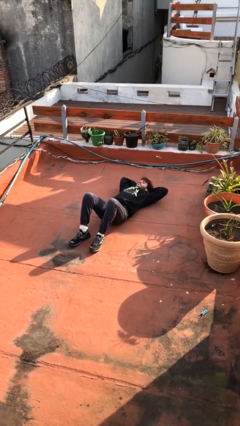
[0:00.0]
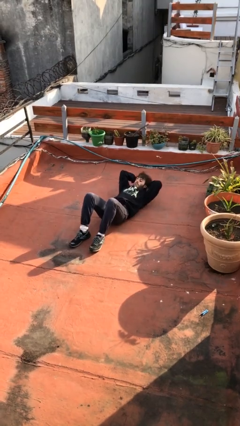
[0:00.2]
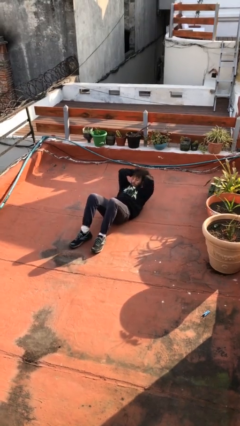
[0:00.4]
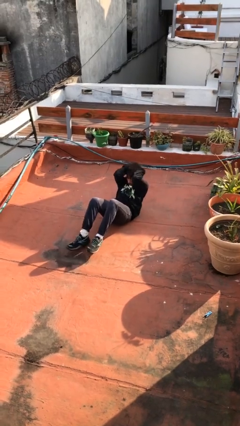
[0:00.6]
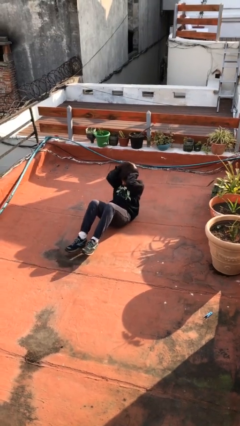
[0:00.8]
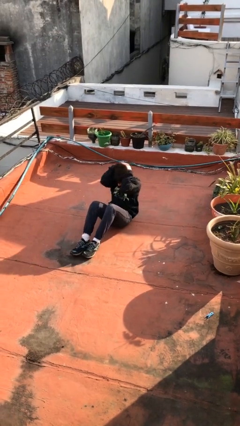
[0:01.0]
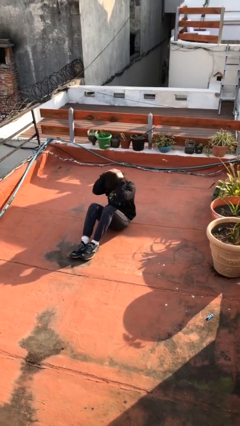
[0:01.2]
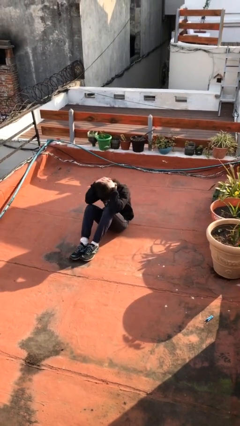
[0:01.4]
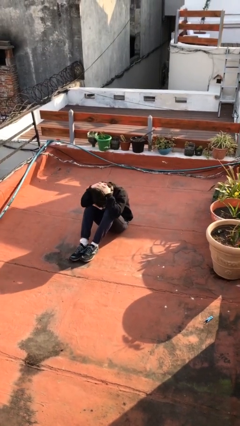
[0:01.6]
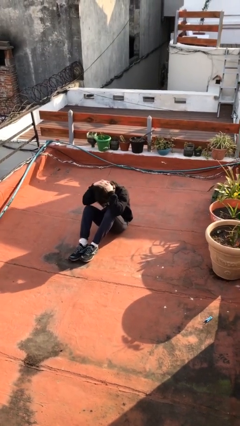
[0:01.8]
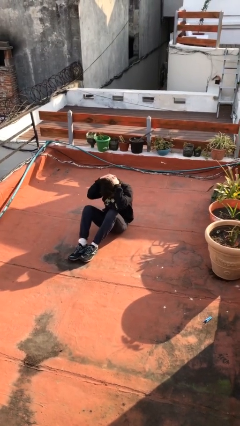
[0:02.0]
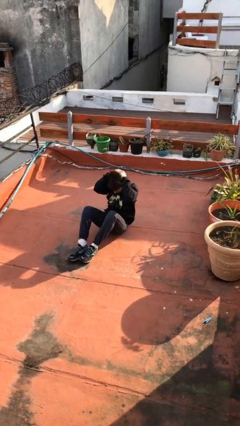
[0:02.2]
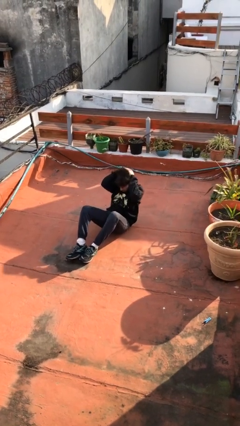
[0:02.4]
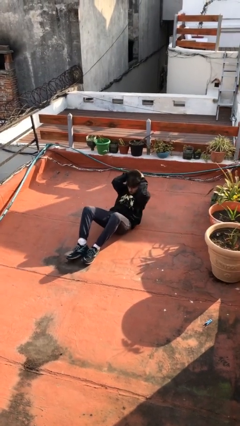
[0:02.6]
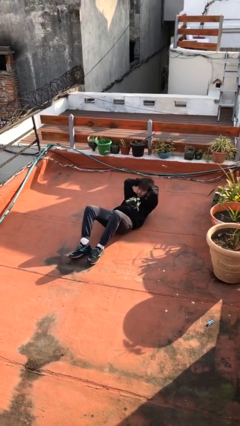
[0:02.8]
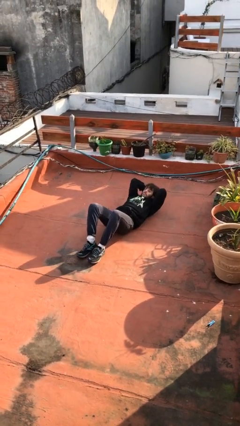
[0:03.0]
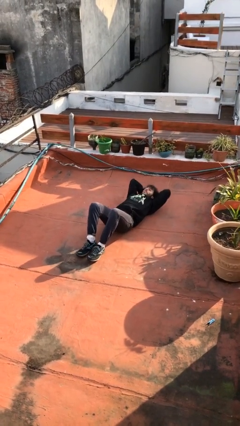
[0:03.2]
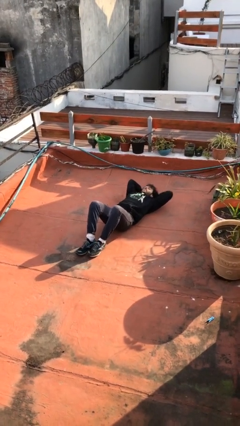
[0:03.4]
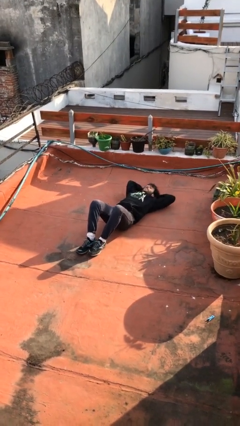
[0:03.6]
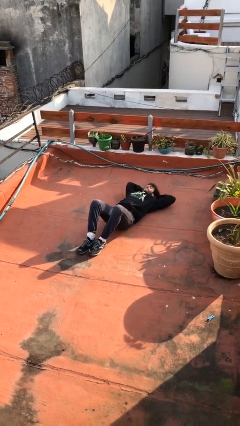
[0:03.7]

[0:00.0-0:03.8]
person exercises with situp

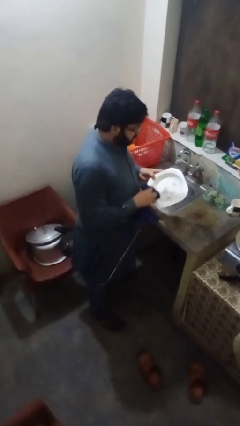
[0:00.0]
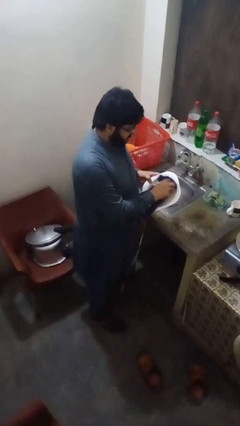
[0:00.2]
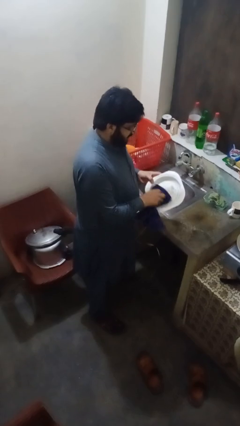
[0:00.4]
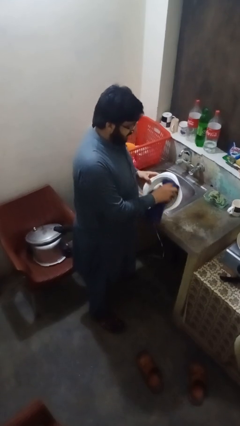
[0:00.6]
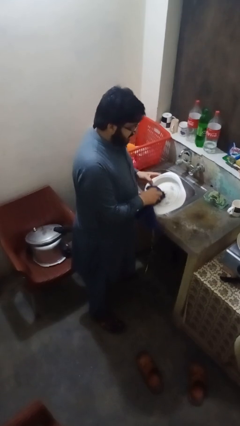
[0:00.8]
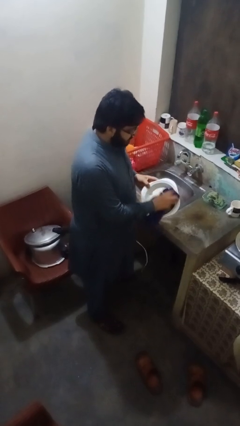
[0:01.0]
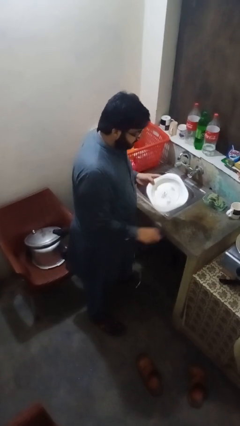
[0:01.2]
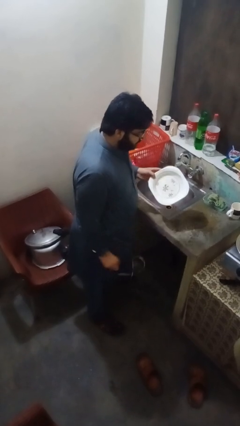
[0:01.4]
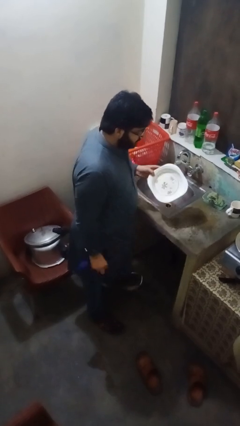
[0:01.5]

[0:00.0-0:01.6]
person dries dish

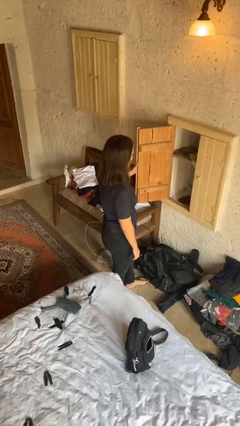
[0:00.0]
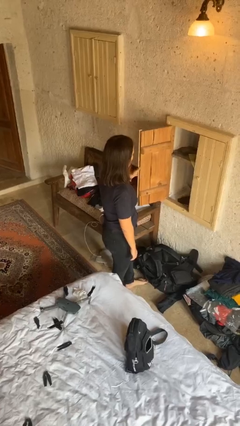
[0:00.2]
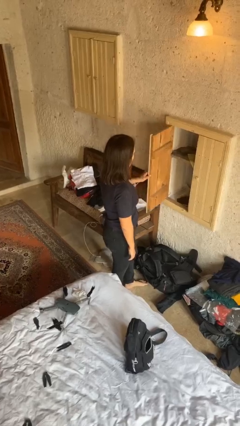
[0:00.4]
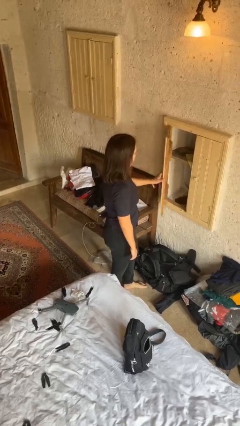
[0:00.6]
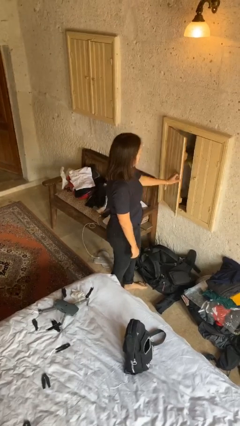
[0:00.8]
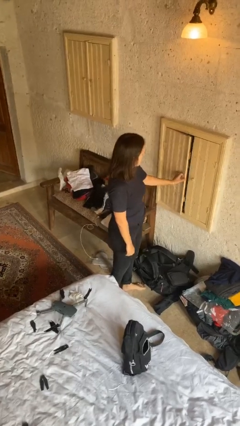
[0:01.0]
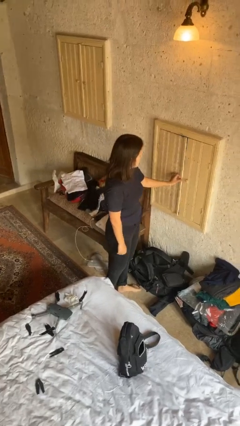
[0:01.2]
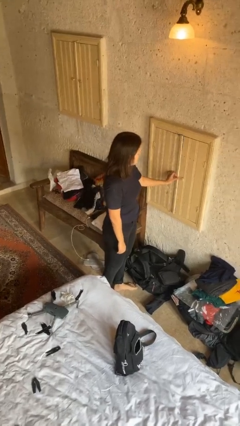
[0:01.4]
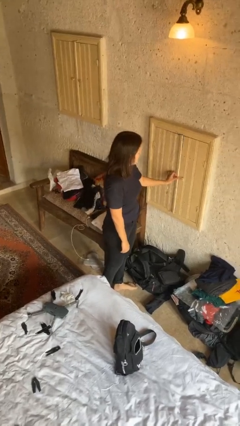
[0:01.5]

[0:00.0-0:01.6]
person closes closet door

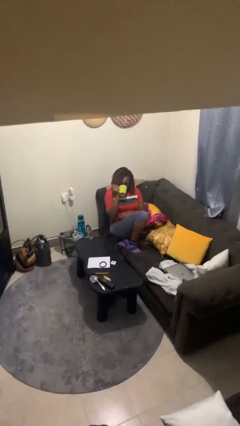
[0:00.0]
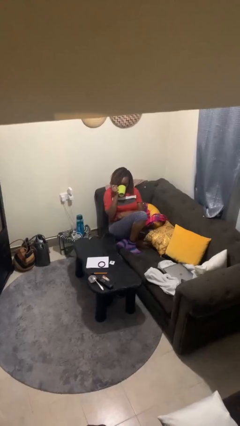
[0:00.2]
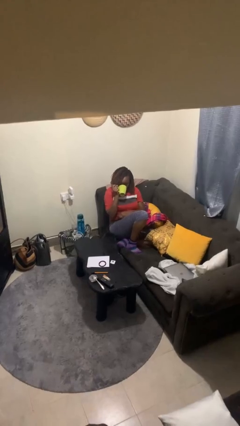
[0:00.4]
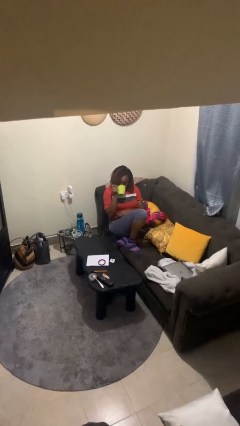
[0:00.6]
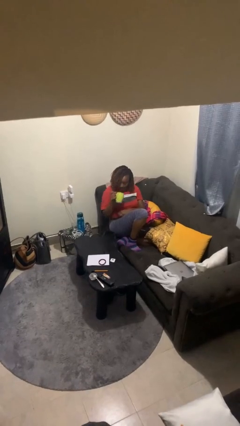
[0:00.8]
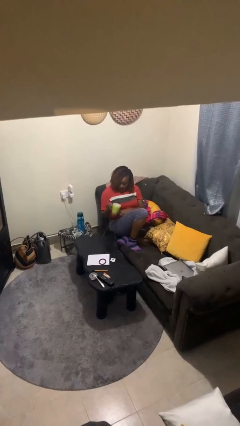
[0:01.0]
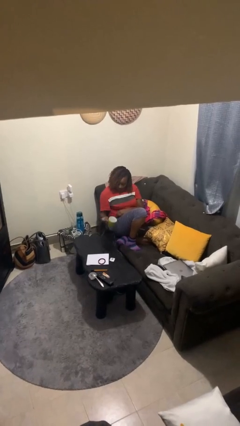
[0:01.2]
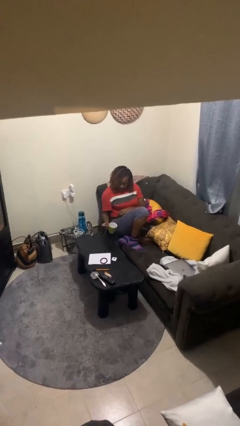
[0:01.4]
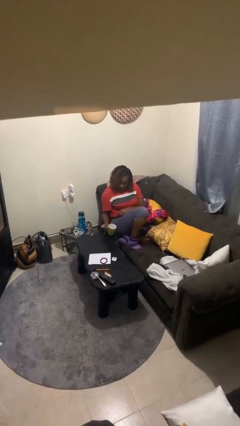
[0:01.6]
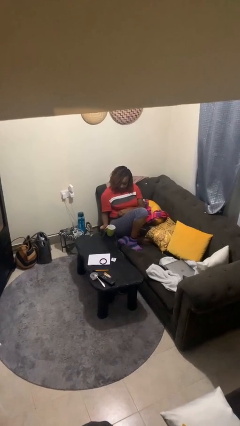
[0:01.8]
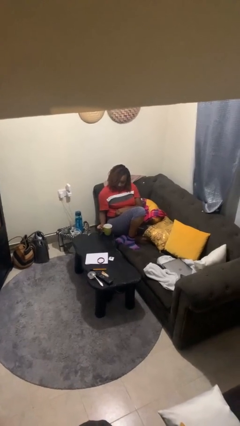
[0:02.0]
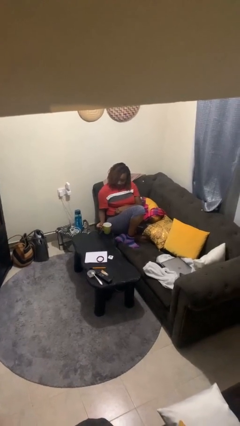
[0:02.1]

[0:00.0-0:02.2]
person puts down object on table

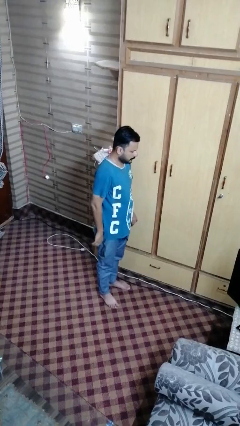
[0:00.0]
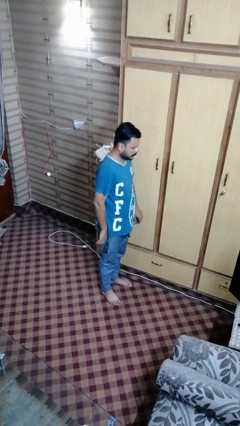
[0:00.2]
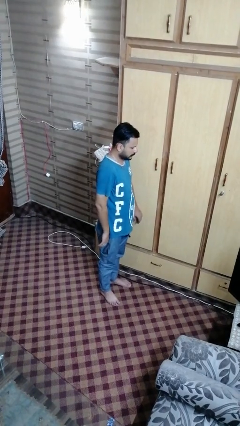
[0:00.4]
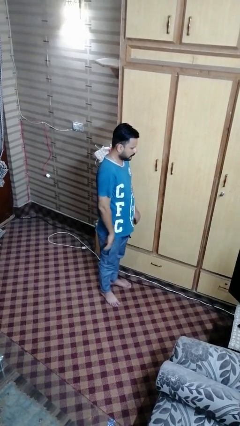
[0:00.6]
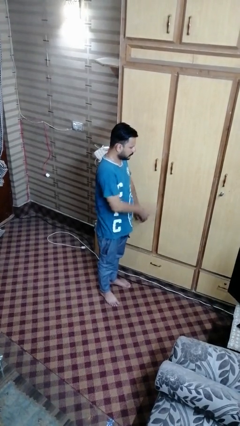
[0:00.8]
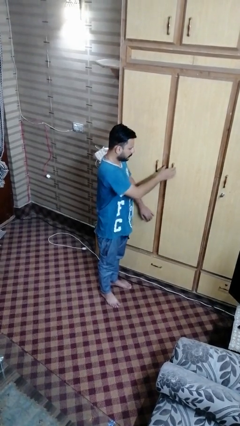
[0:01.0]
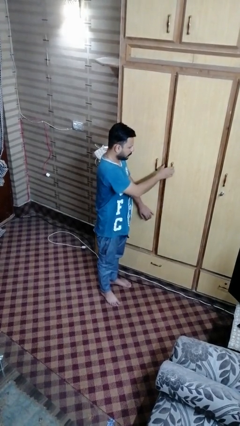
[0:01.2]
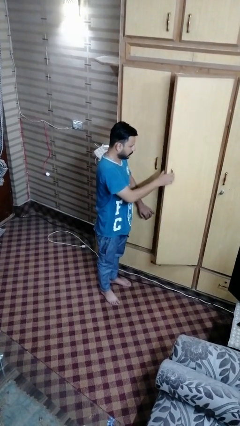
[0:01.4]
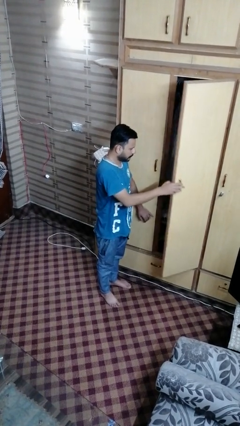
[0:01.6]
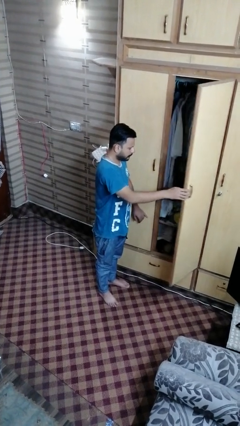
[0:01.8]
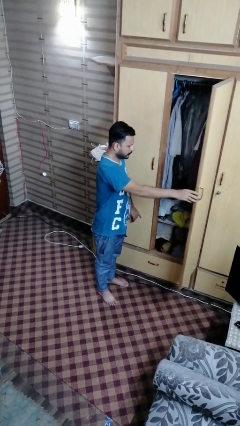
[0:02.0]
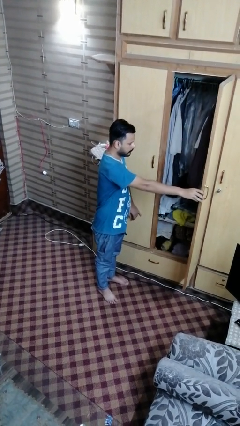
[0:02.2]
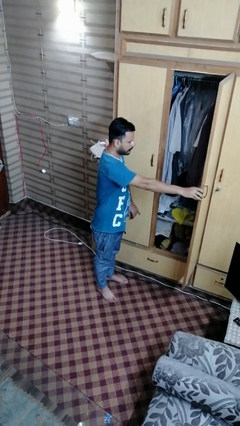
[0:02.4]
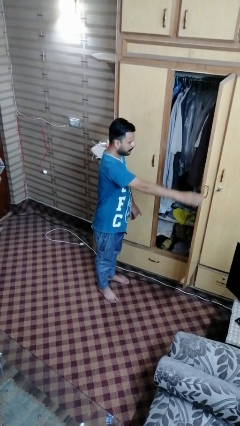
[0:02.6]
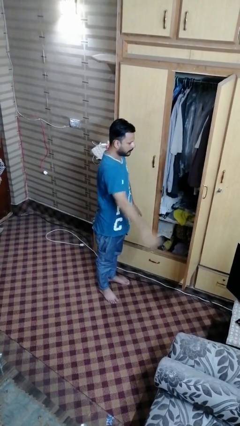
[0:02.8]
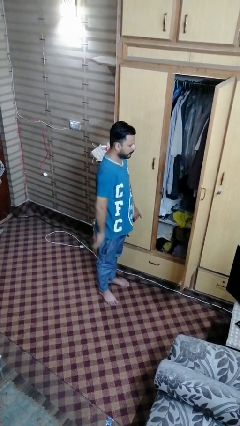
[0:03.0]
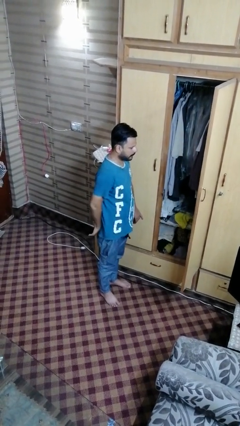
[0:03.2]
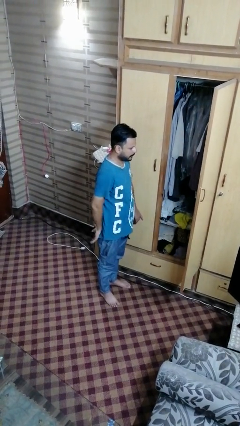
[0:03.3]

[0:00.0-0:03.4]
person opens closet door

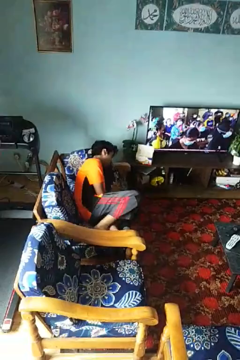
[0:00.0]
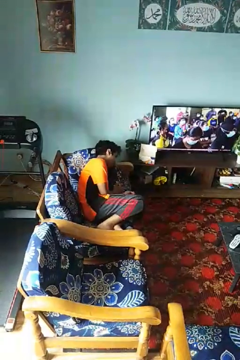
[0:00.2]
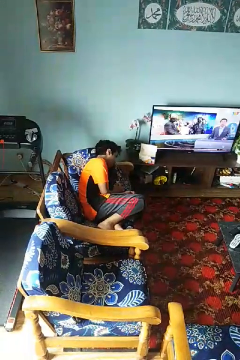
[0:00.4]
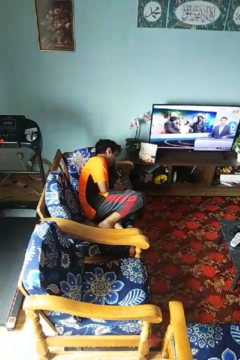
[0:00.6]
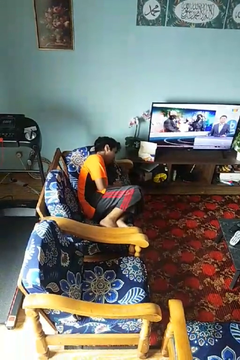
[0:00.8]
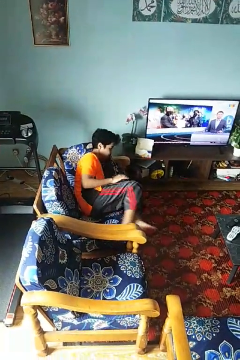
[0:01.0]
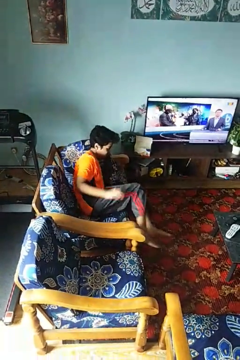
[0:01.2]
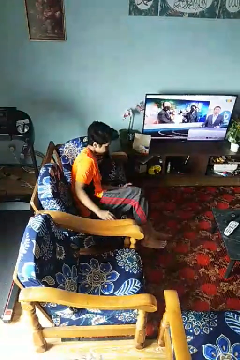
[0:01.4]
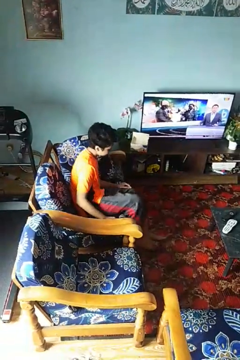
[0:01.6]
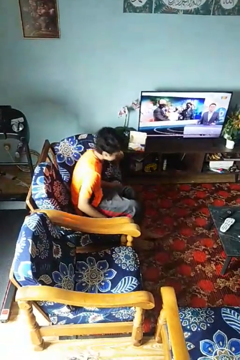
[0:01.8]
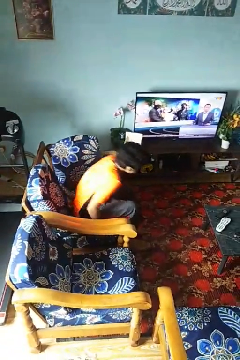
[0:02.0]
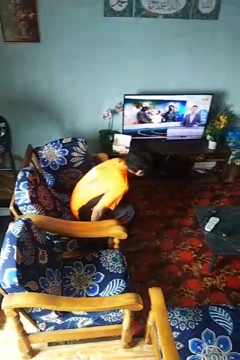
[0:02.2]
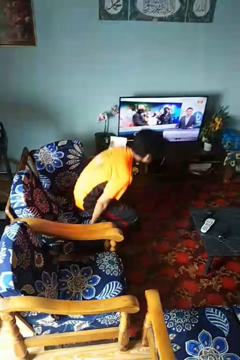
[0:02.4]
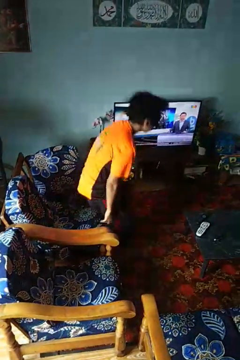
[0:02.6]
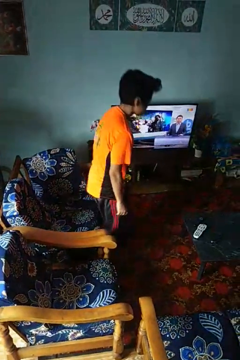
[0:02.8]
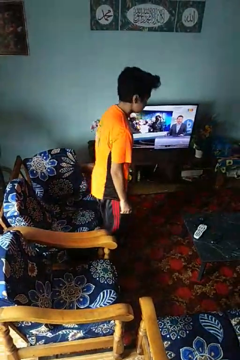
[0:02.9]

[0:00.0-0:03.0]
person stands up

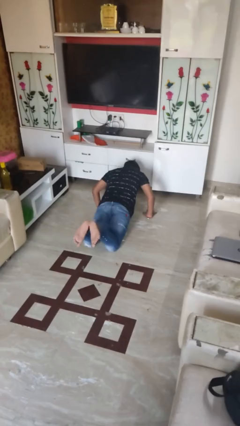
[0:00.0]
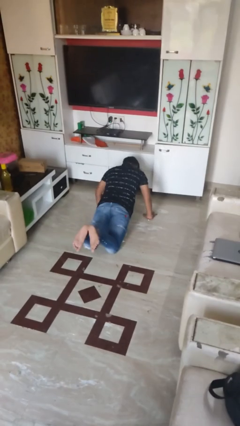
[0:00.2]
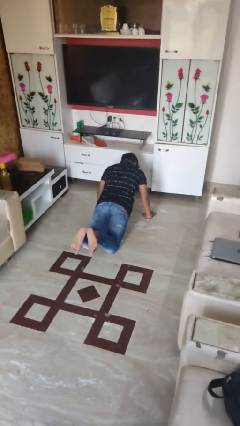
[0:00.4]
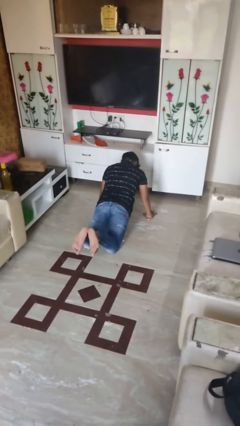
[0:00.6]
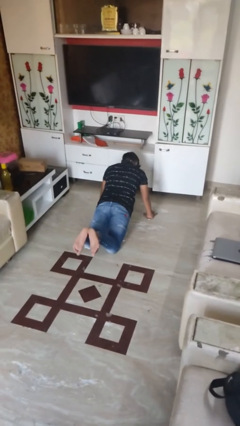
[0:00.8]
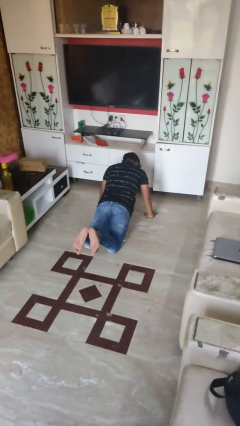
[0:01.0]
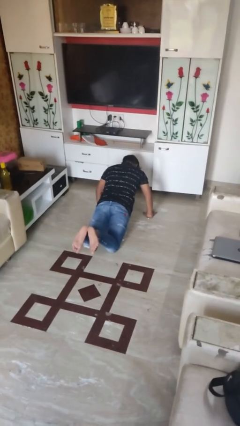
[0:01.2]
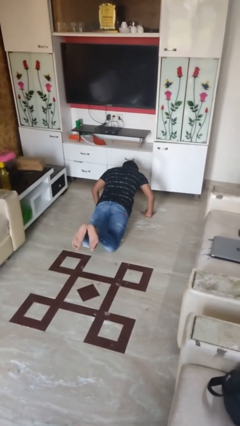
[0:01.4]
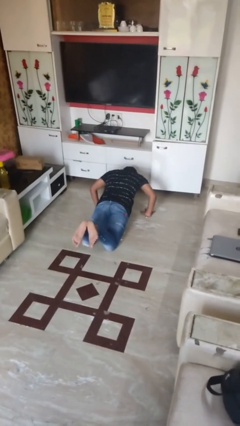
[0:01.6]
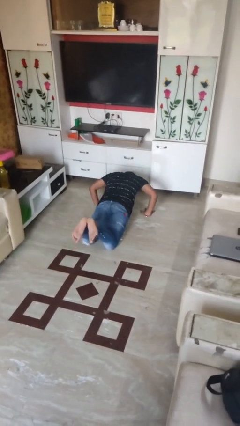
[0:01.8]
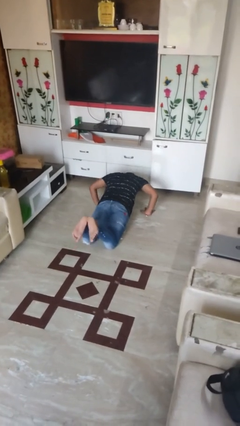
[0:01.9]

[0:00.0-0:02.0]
person exercises with pushup
